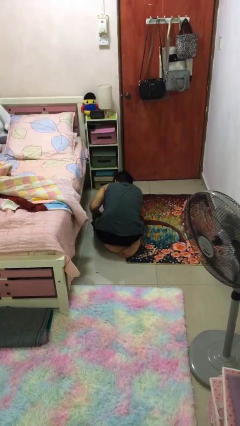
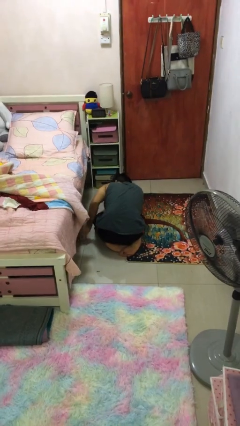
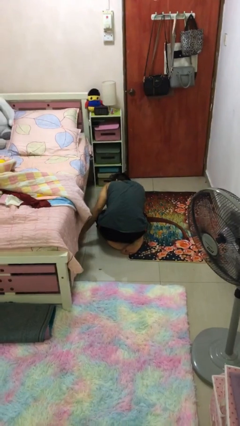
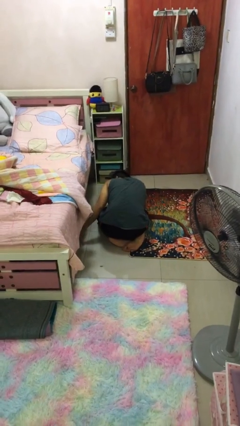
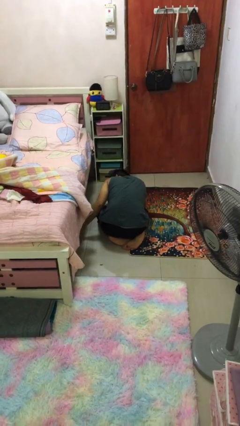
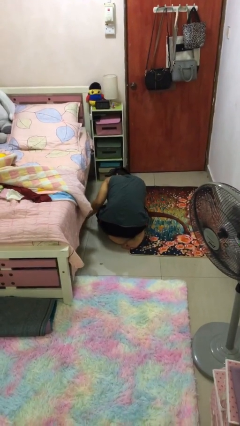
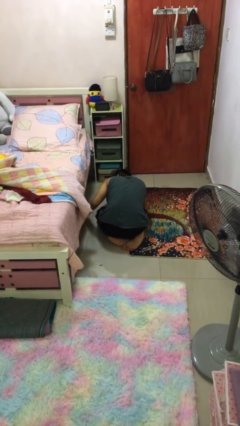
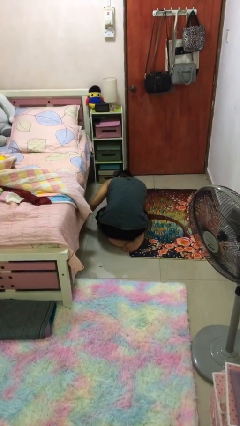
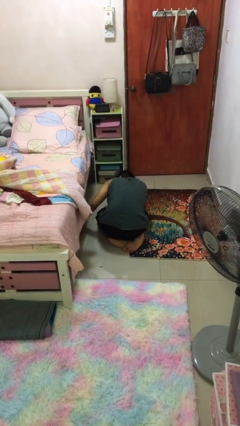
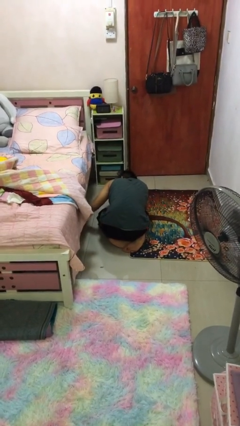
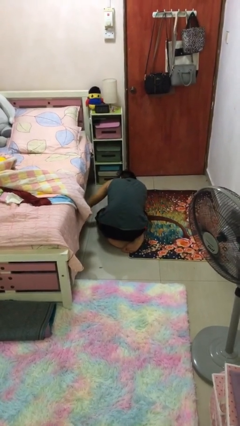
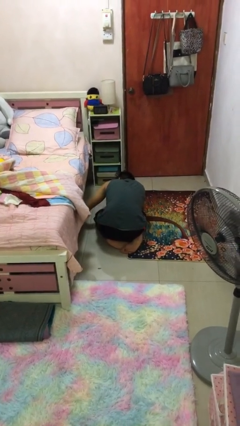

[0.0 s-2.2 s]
person searches under bed

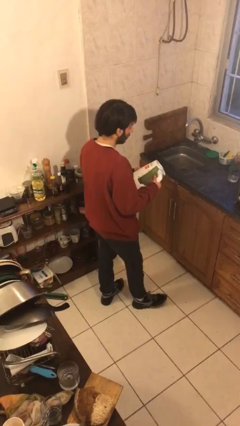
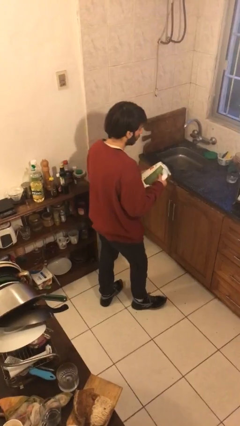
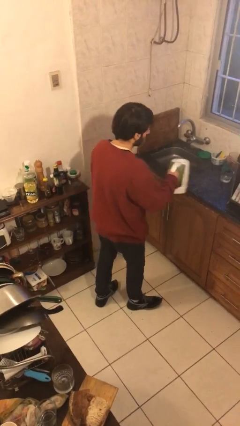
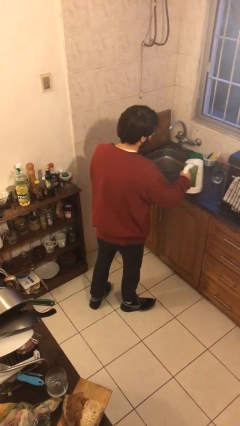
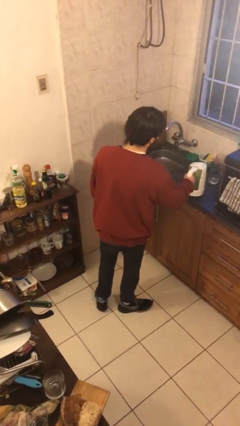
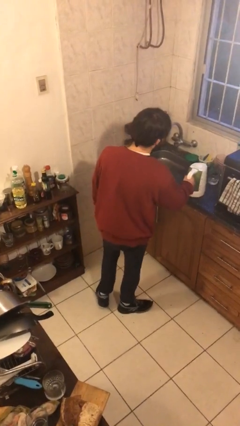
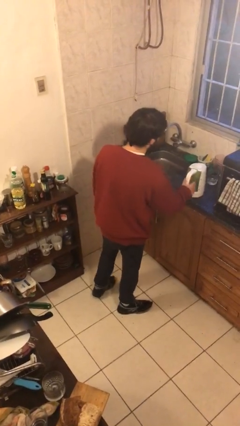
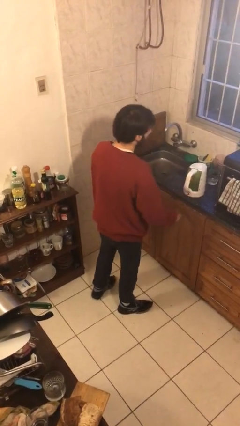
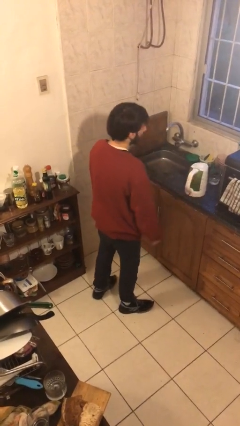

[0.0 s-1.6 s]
person puts down object on countertop

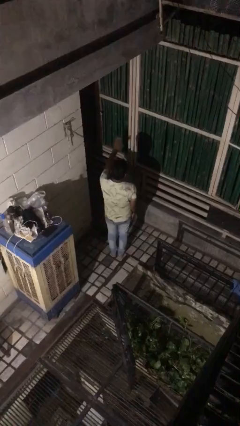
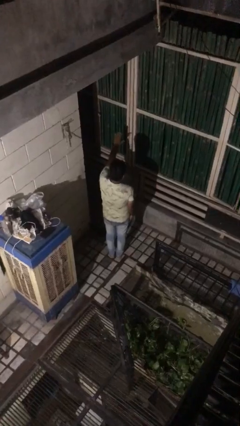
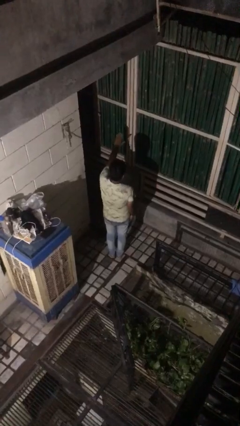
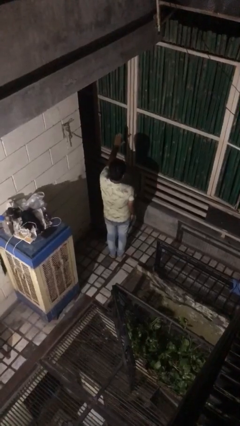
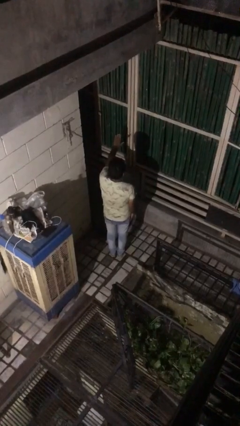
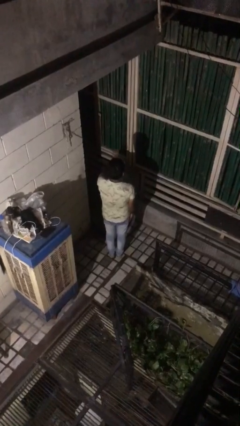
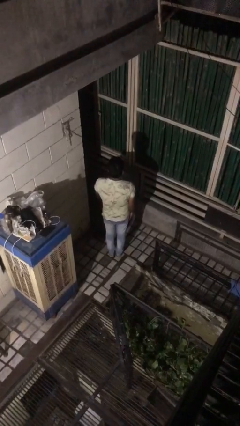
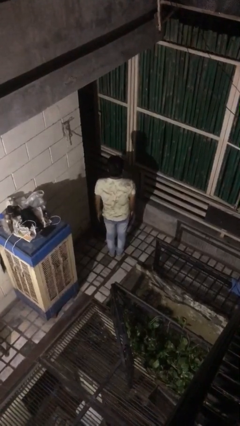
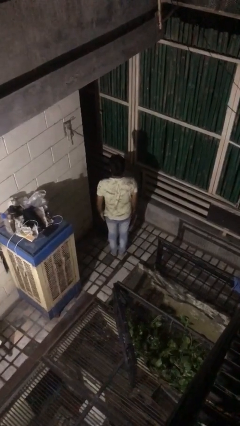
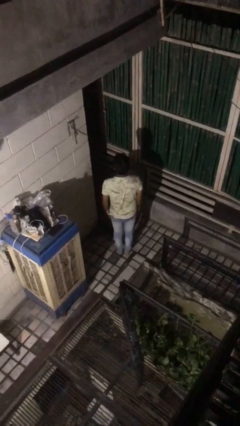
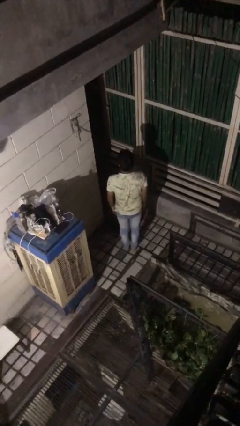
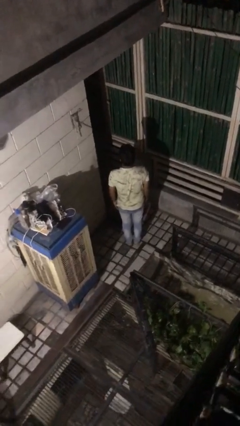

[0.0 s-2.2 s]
person gestures stop

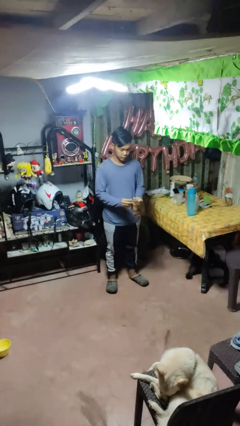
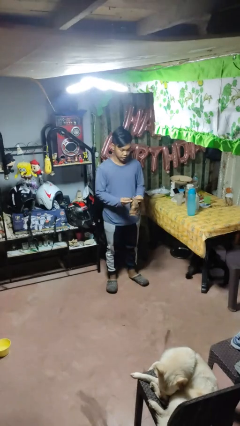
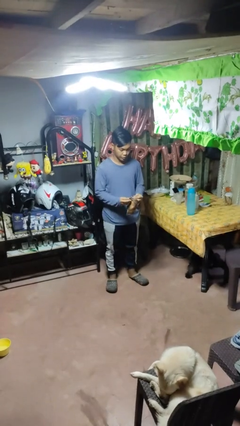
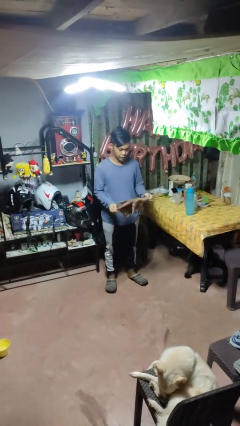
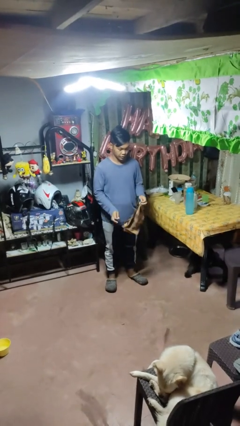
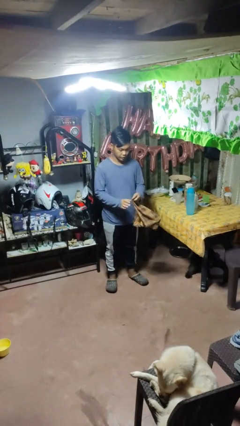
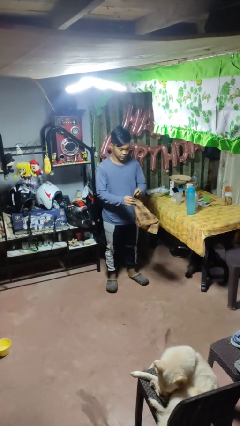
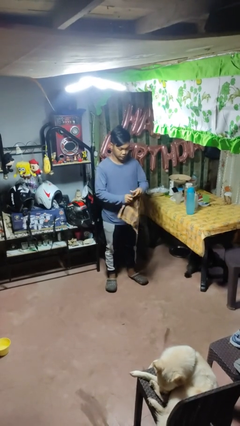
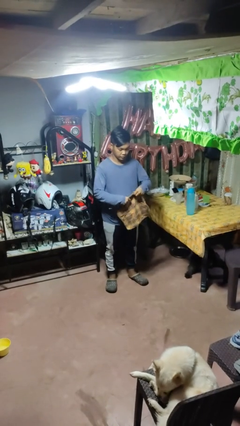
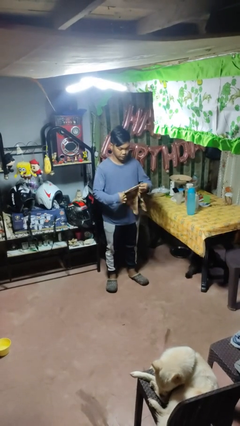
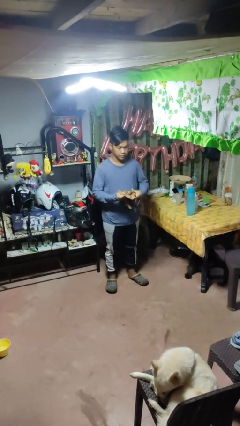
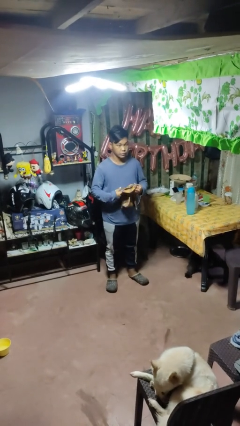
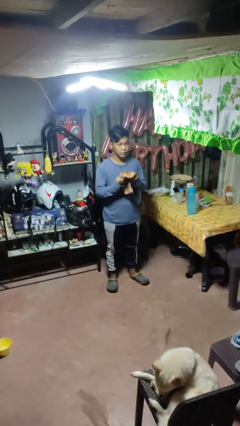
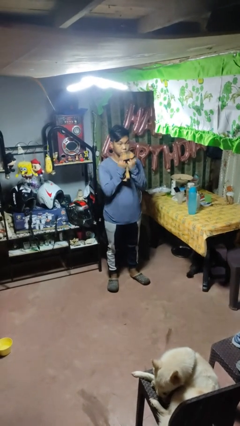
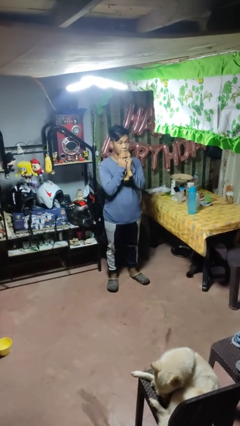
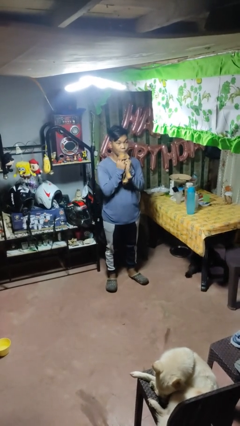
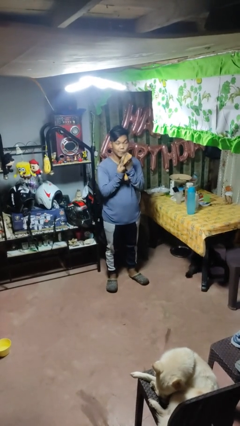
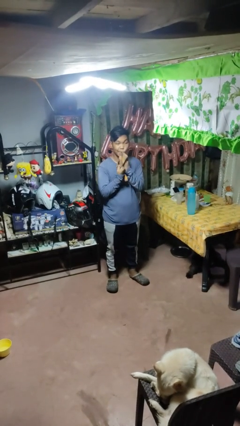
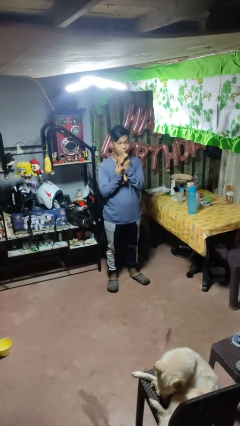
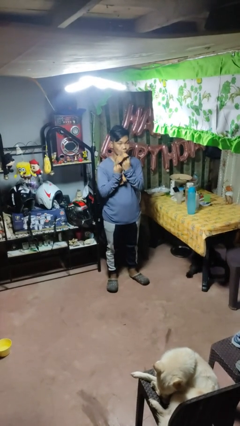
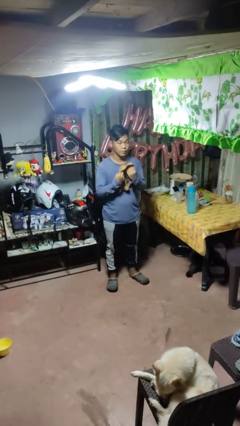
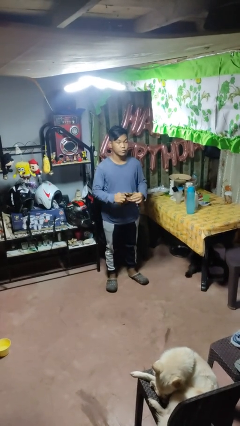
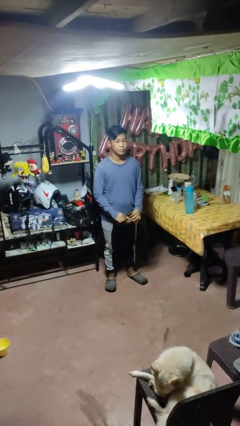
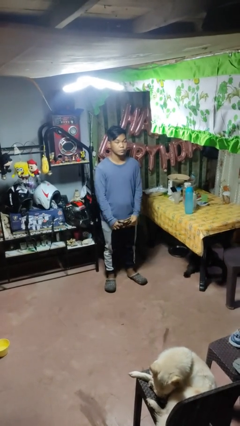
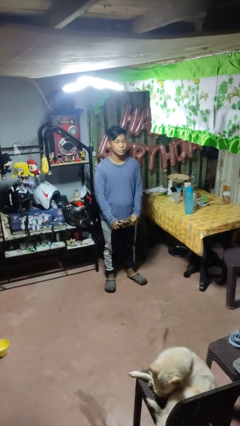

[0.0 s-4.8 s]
person wipes mouth with napkin

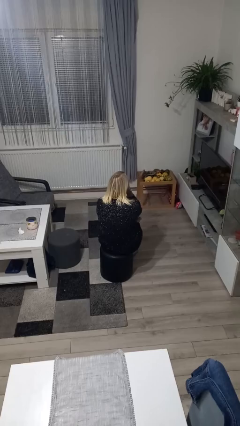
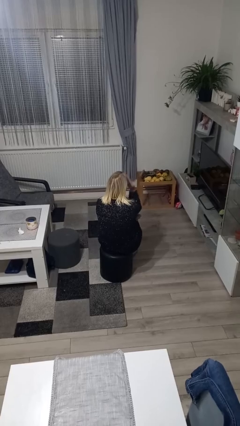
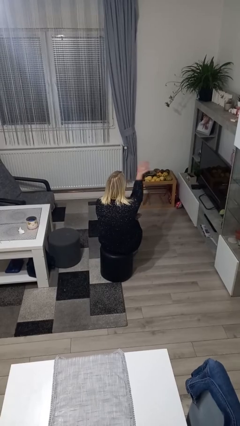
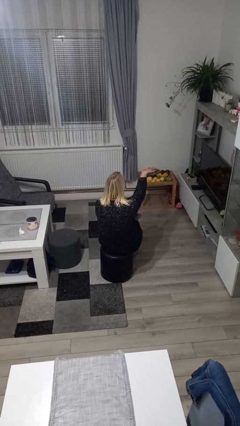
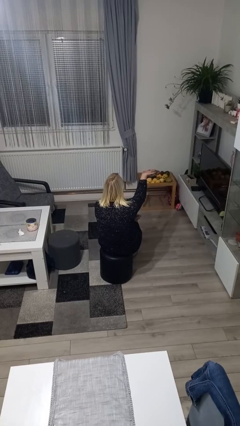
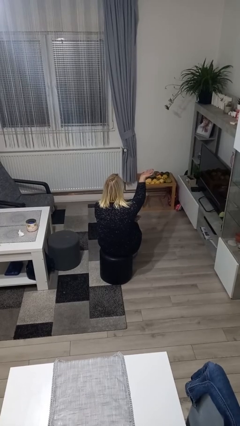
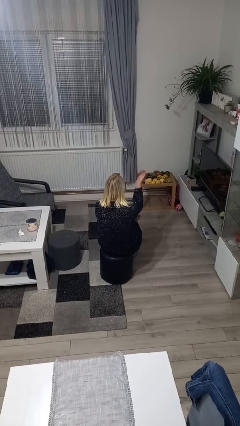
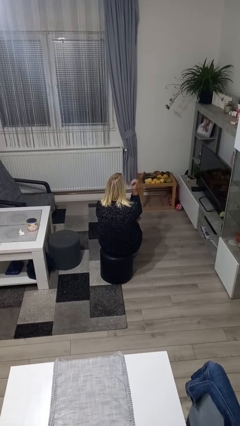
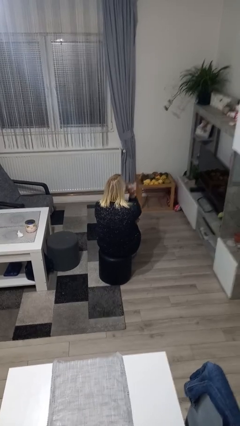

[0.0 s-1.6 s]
person gestures blow kiss

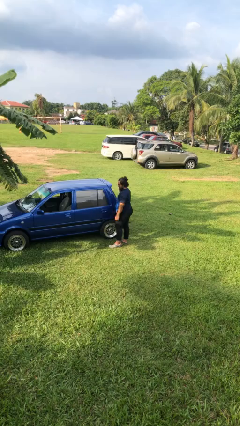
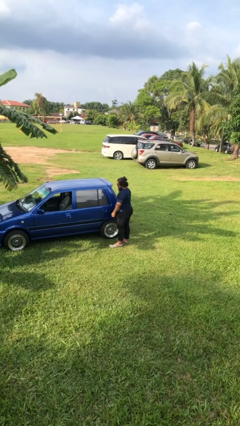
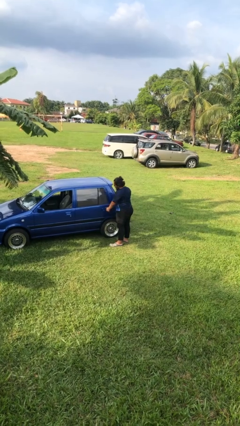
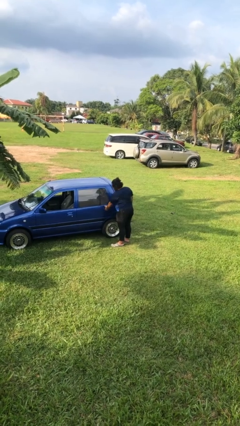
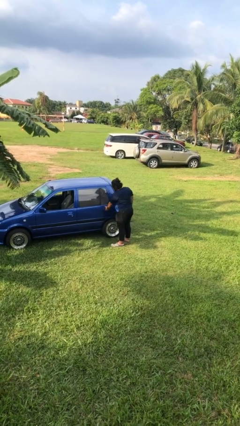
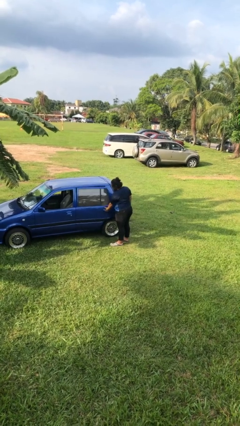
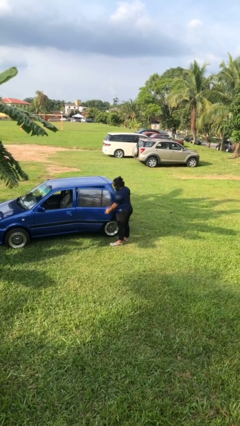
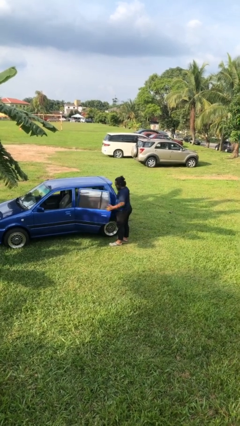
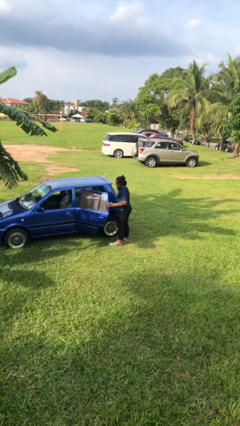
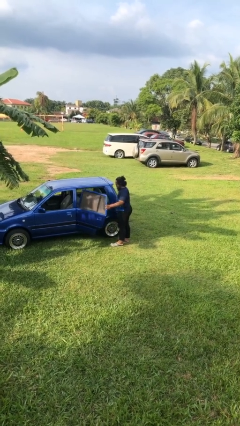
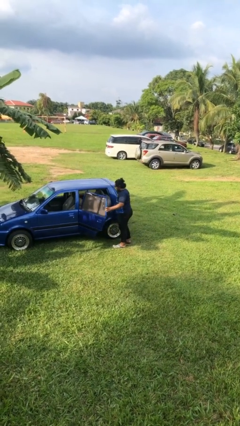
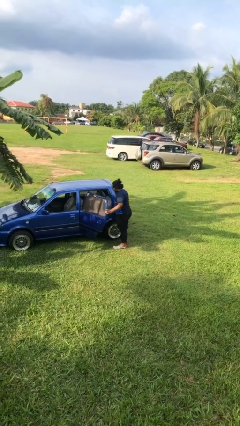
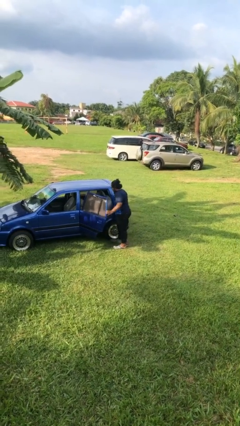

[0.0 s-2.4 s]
person opens car door

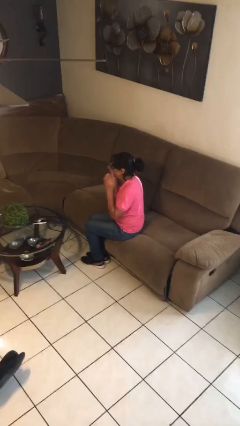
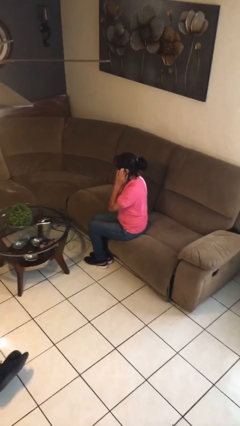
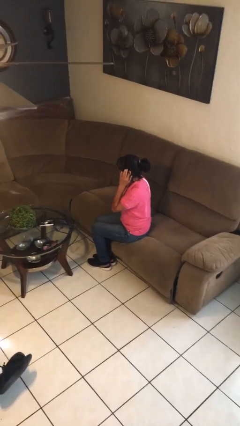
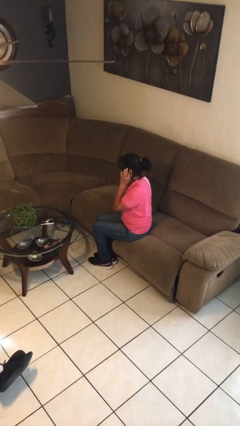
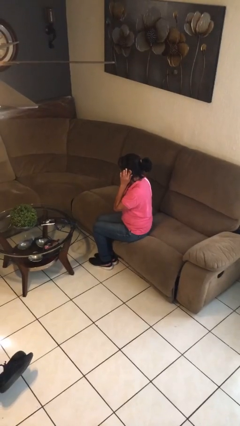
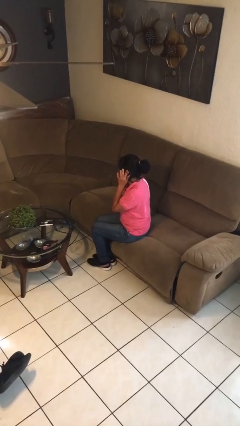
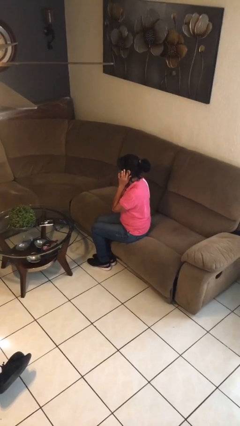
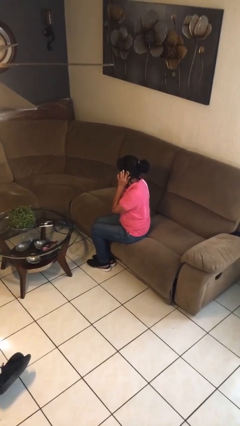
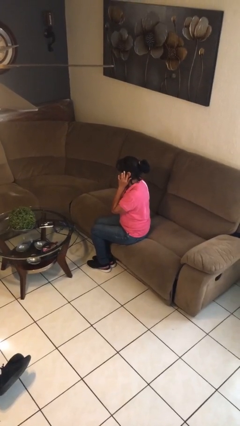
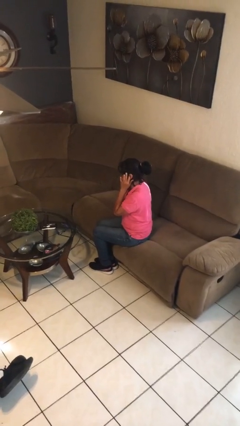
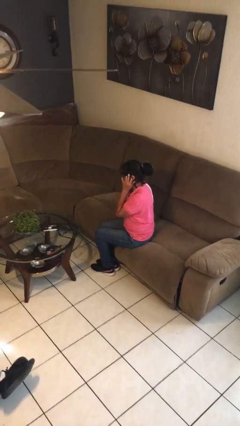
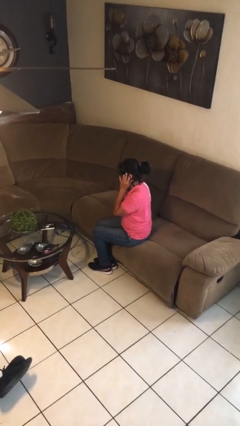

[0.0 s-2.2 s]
person puts fingers in ear

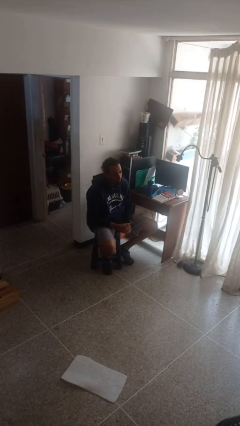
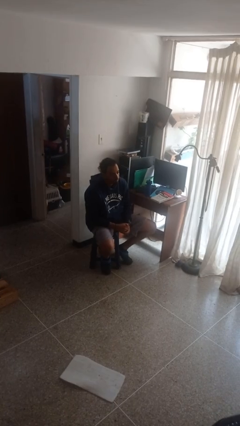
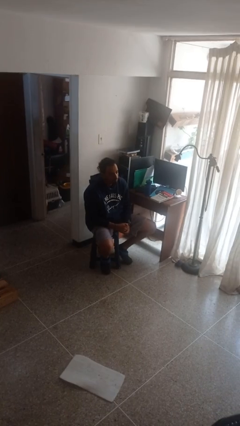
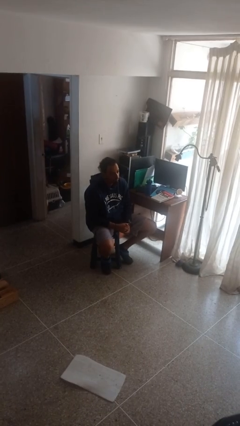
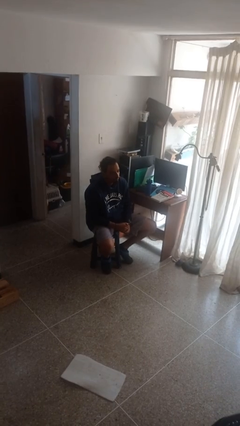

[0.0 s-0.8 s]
person gestures lower hand
